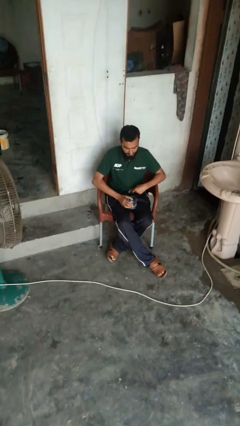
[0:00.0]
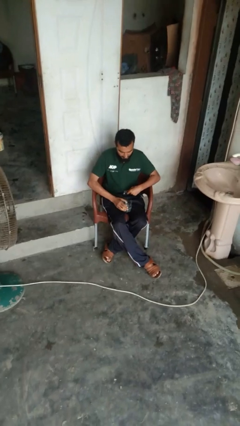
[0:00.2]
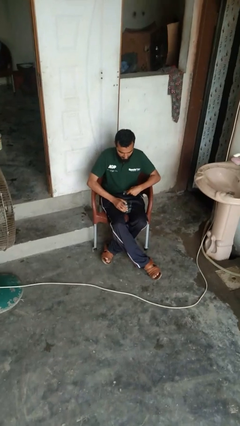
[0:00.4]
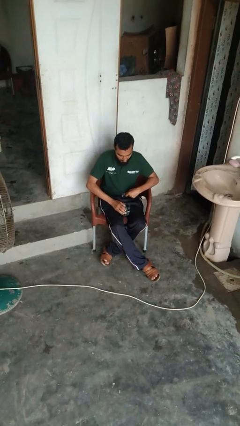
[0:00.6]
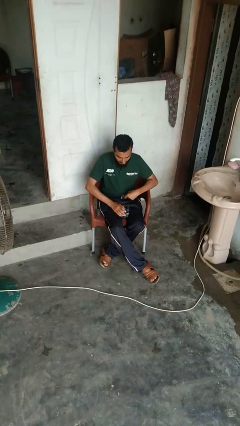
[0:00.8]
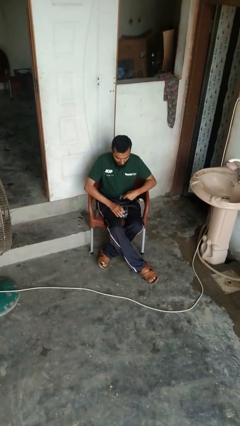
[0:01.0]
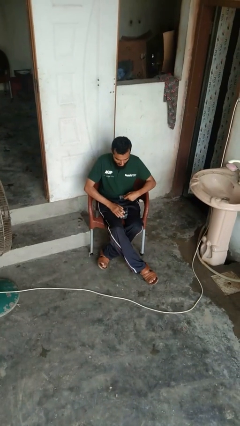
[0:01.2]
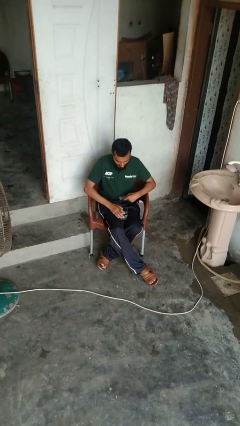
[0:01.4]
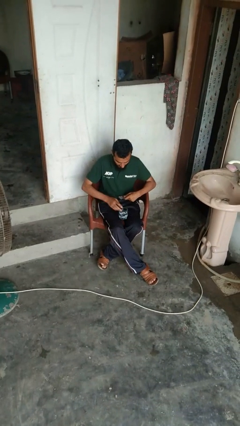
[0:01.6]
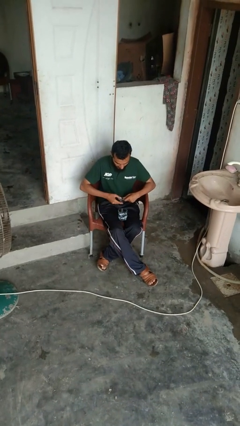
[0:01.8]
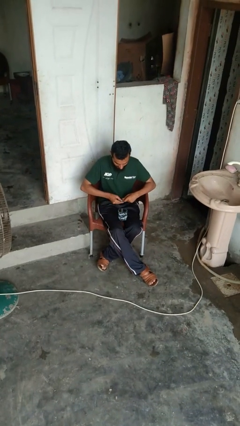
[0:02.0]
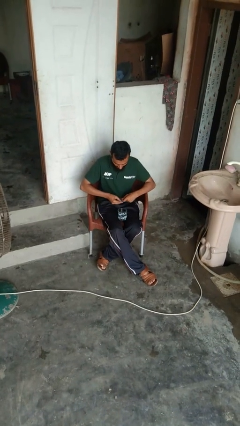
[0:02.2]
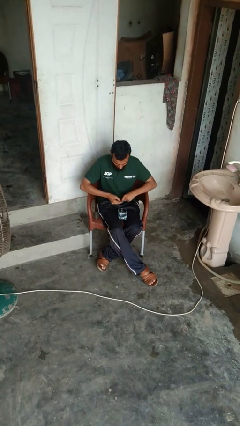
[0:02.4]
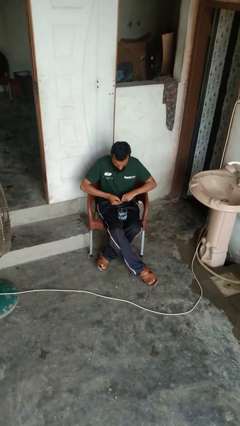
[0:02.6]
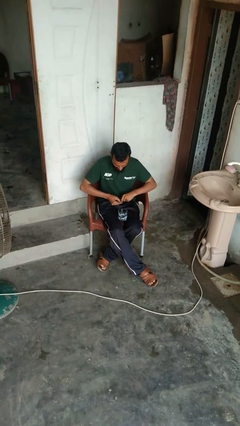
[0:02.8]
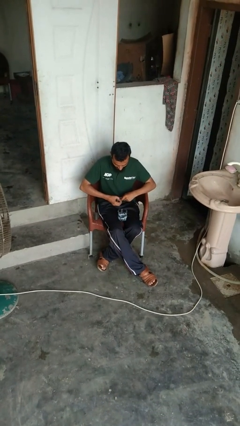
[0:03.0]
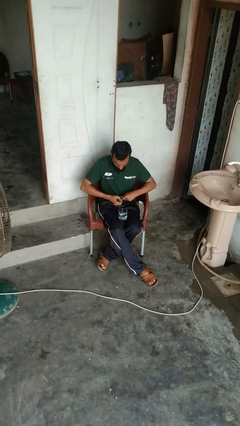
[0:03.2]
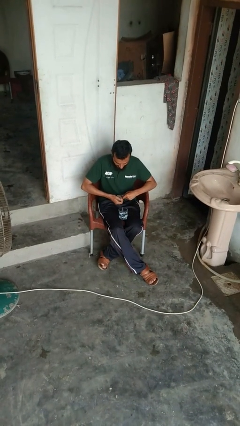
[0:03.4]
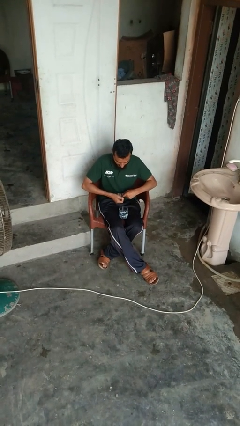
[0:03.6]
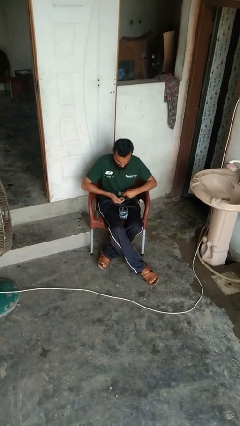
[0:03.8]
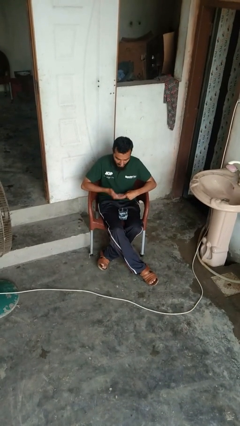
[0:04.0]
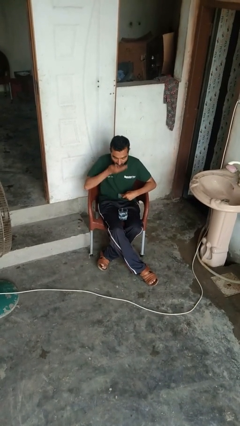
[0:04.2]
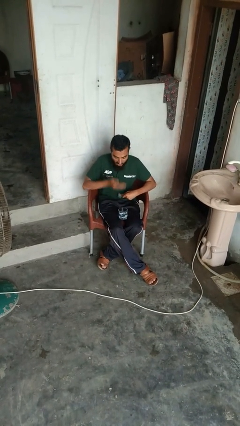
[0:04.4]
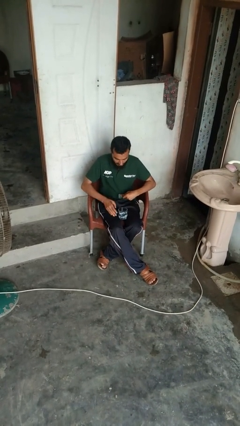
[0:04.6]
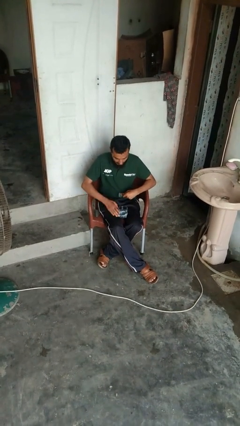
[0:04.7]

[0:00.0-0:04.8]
person takes medicine pills

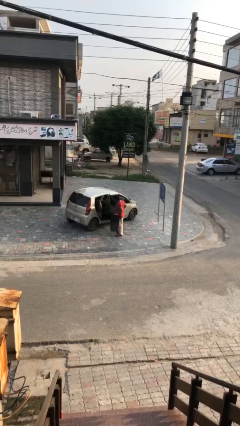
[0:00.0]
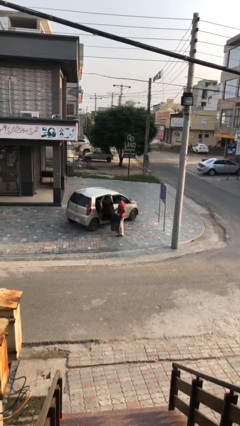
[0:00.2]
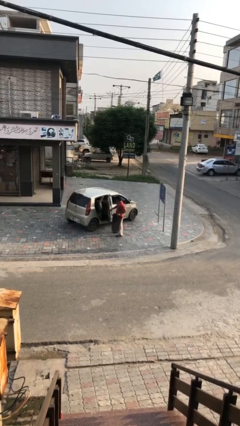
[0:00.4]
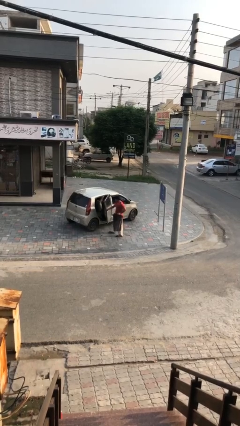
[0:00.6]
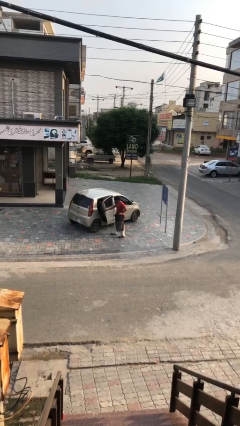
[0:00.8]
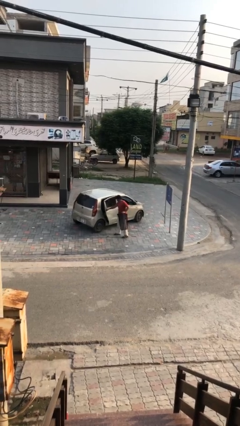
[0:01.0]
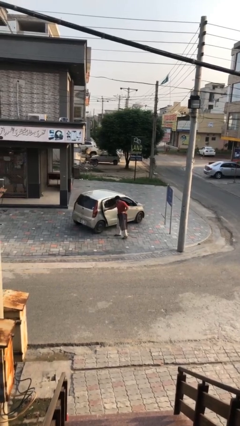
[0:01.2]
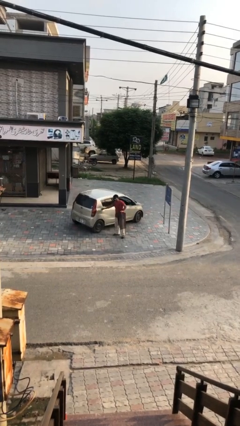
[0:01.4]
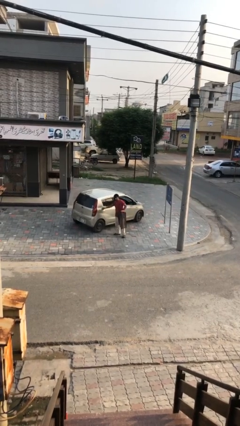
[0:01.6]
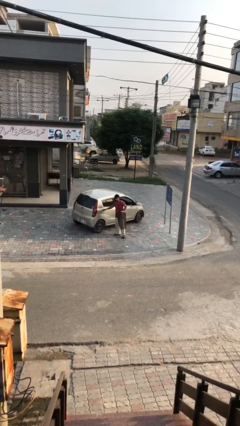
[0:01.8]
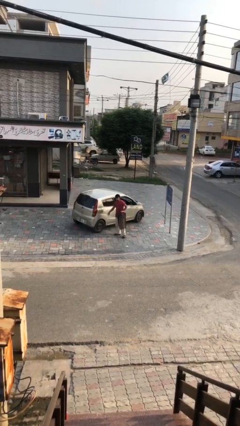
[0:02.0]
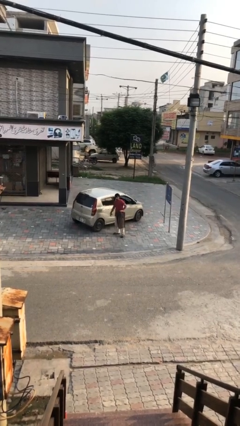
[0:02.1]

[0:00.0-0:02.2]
person closes car door

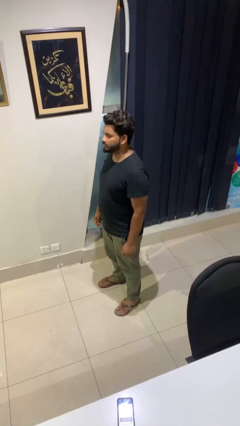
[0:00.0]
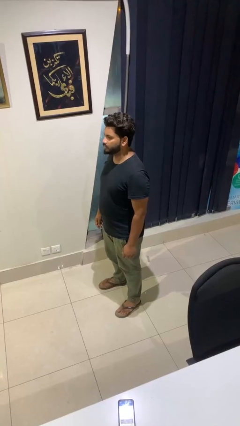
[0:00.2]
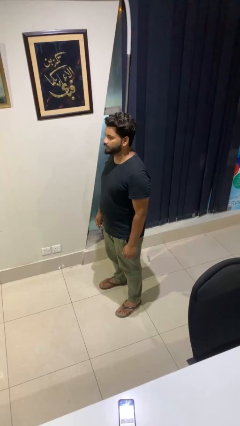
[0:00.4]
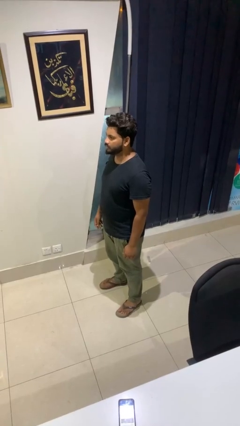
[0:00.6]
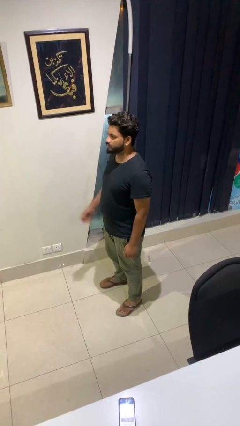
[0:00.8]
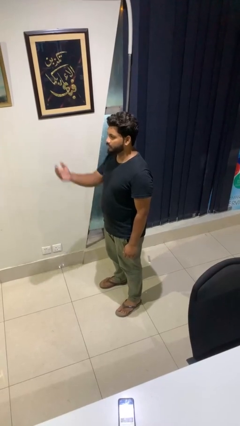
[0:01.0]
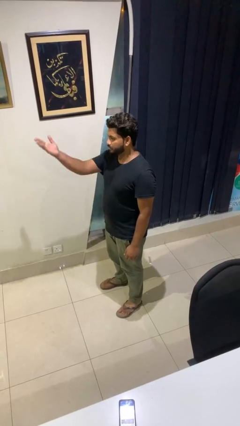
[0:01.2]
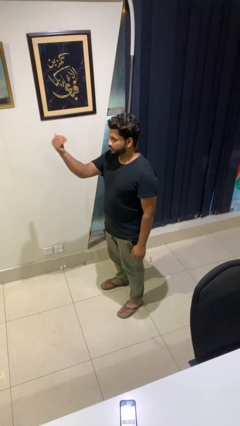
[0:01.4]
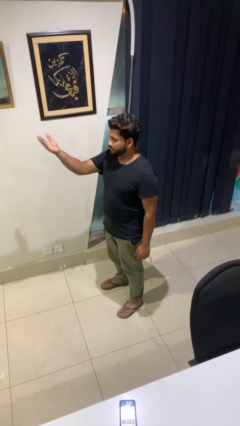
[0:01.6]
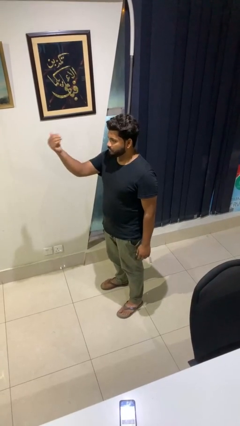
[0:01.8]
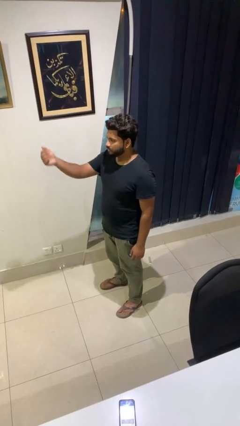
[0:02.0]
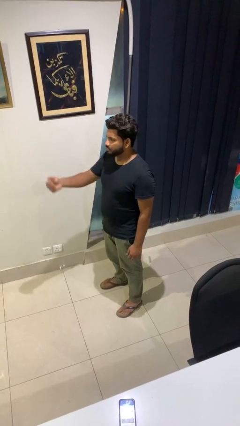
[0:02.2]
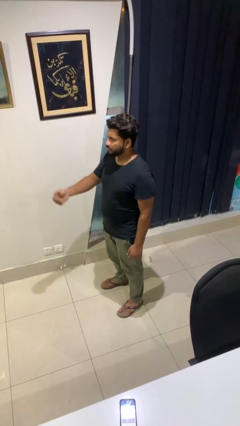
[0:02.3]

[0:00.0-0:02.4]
person gestures come here

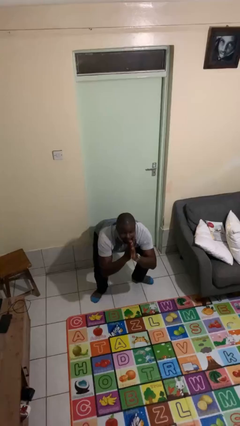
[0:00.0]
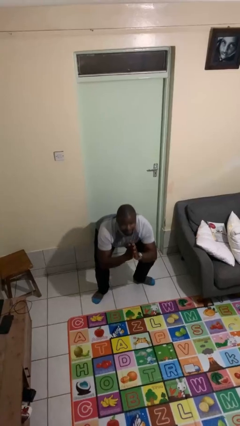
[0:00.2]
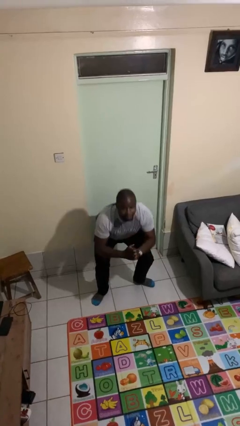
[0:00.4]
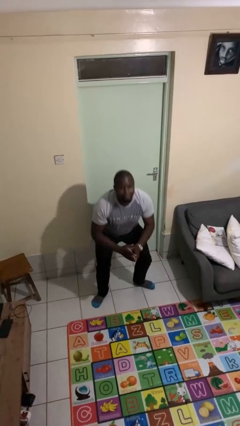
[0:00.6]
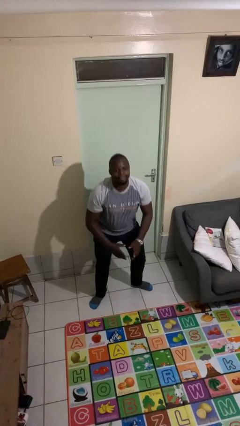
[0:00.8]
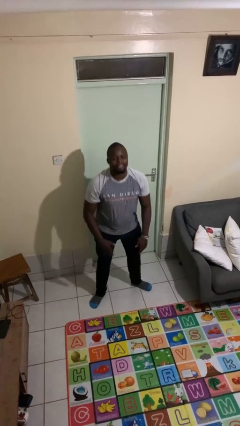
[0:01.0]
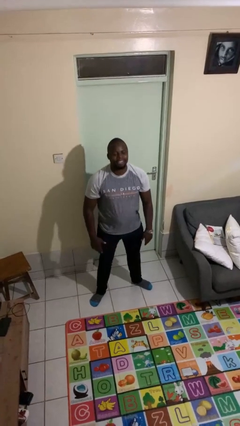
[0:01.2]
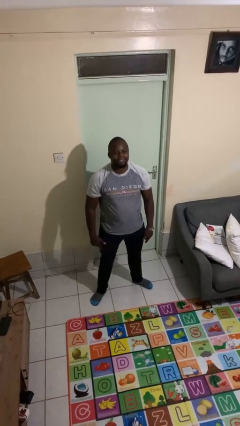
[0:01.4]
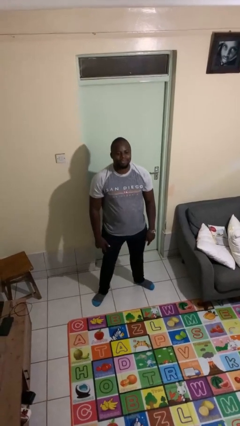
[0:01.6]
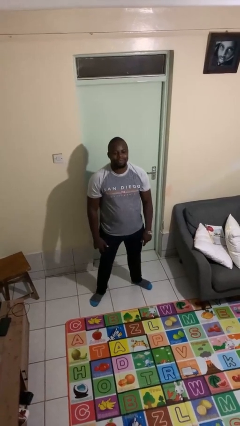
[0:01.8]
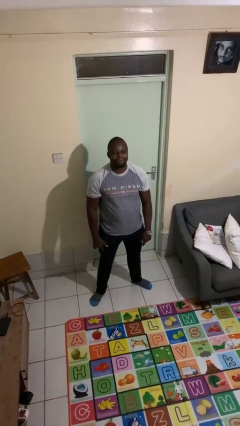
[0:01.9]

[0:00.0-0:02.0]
person stands up

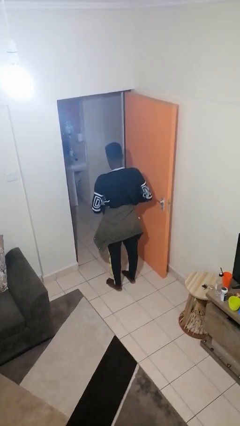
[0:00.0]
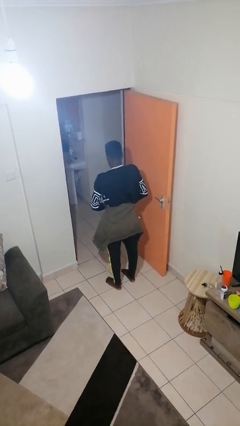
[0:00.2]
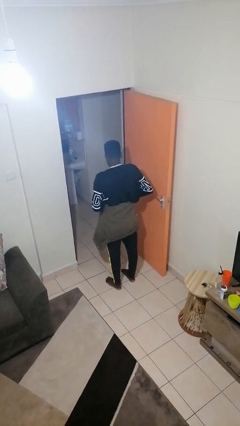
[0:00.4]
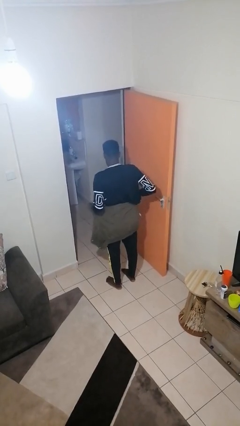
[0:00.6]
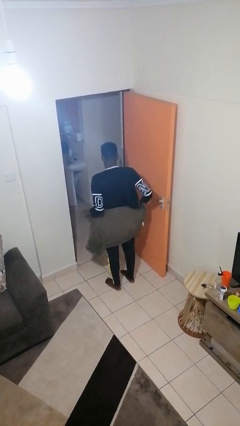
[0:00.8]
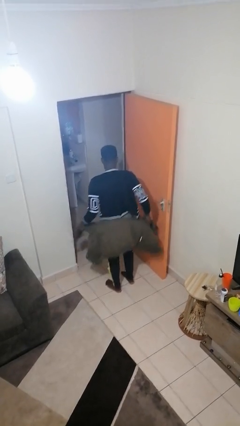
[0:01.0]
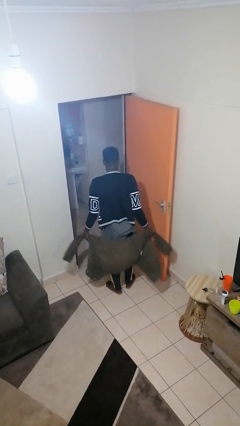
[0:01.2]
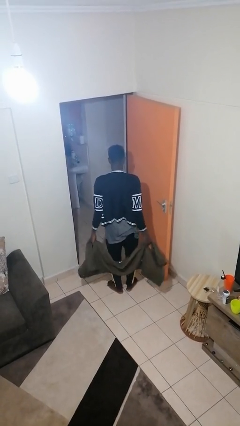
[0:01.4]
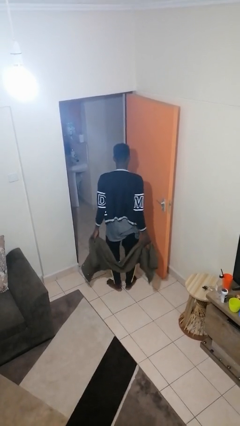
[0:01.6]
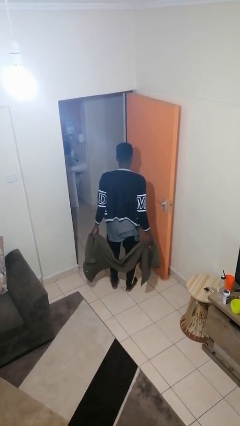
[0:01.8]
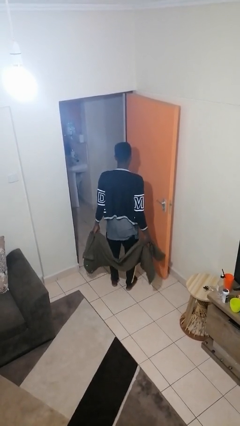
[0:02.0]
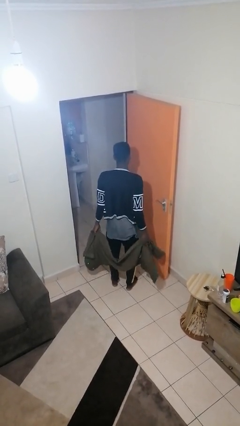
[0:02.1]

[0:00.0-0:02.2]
person unties jacket around waist

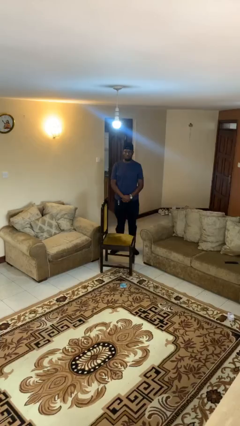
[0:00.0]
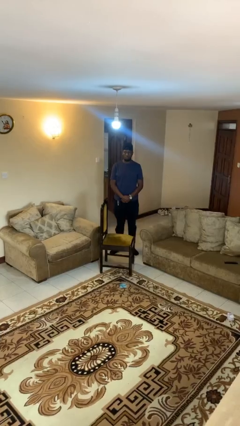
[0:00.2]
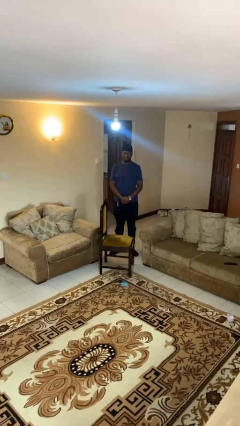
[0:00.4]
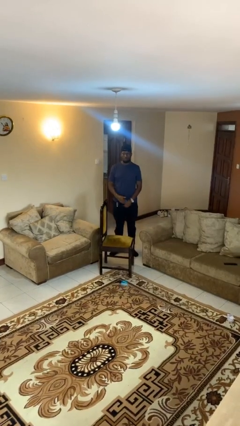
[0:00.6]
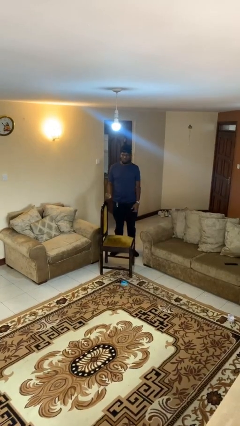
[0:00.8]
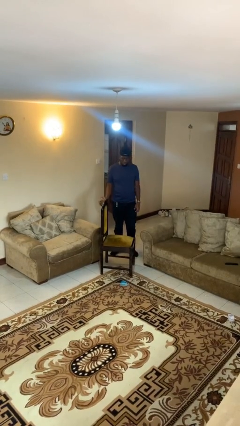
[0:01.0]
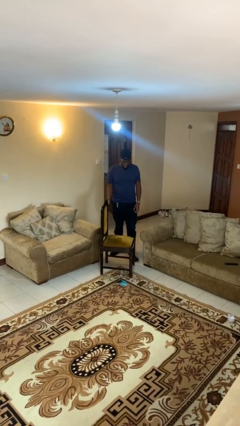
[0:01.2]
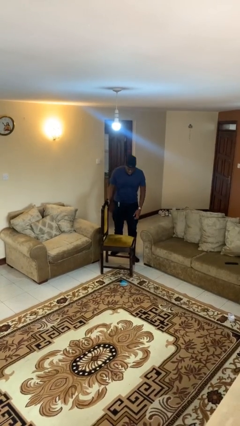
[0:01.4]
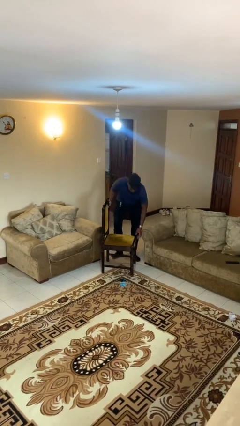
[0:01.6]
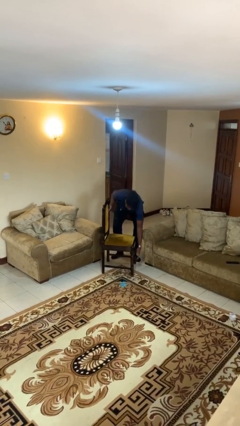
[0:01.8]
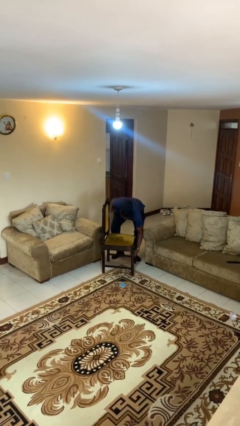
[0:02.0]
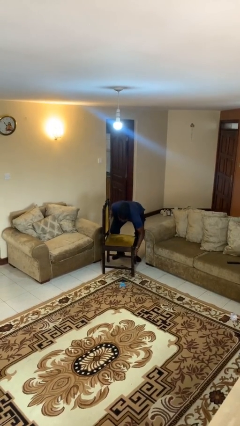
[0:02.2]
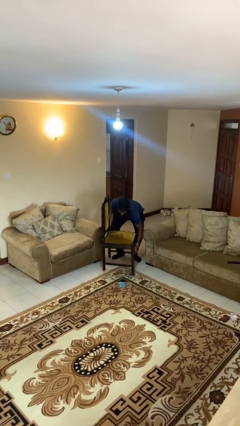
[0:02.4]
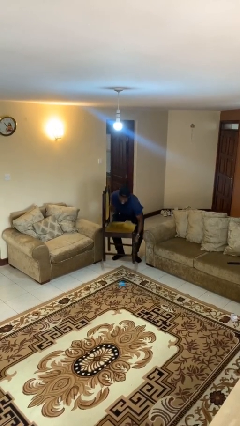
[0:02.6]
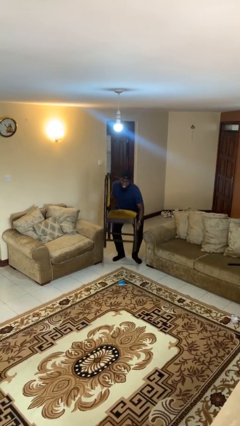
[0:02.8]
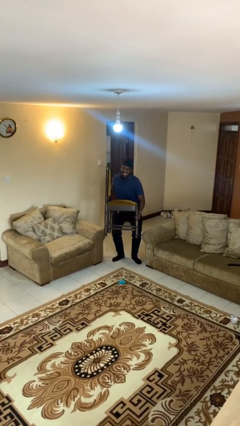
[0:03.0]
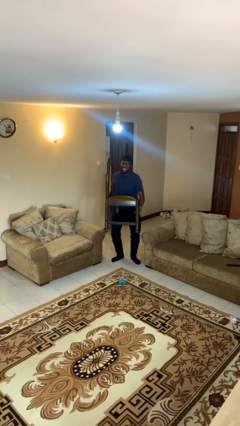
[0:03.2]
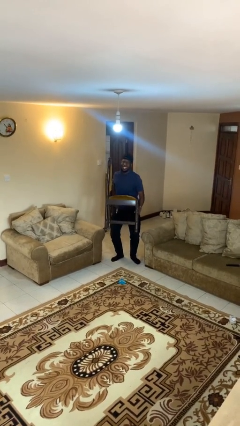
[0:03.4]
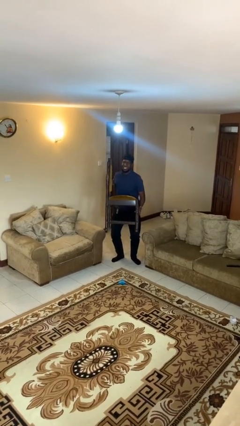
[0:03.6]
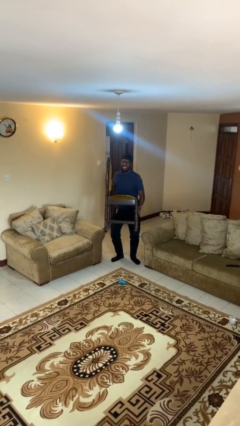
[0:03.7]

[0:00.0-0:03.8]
person picks up object from floor
